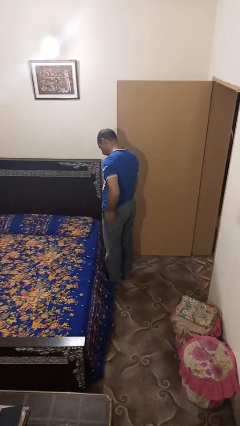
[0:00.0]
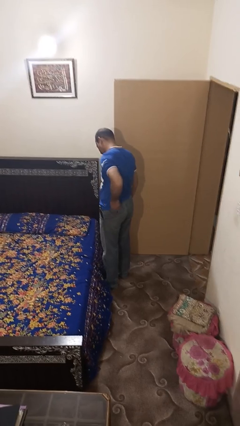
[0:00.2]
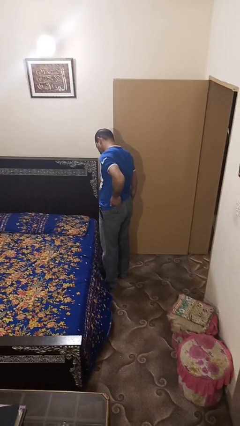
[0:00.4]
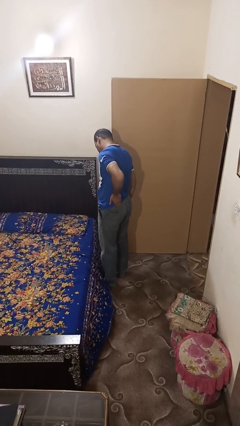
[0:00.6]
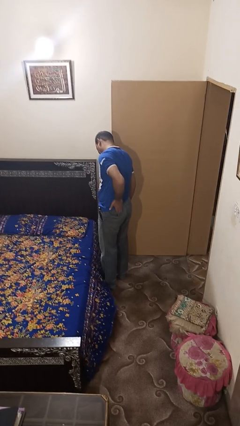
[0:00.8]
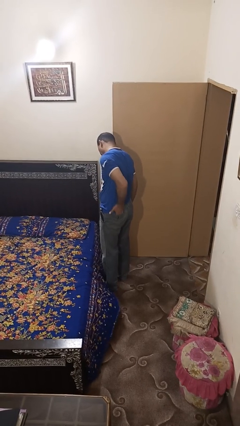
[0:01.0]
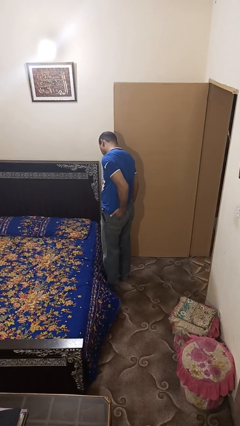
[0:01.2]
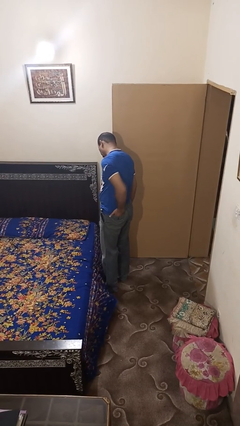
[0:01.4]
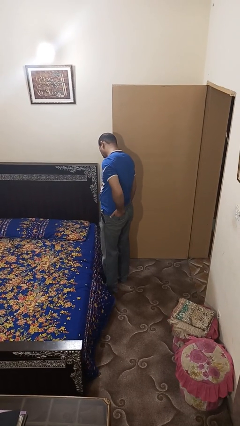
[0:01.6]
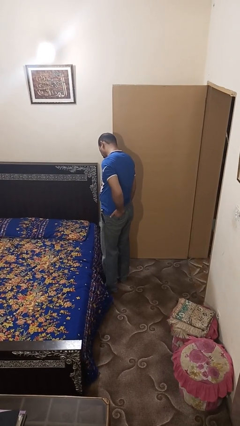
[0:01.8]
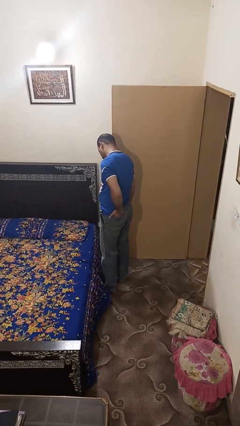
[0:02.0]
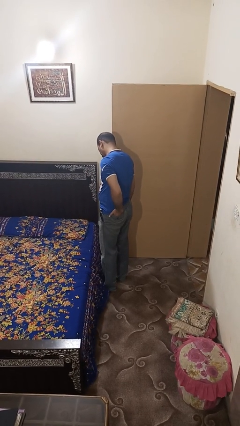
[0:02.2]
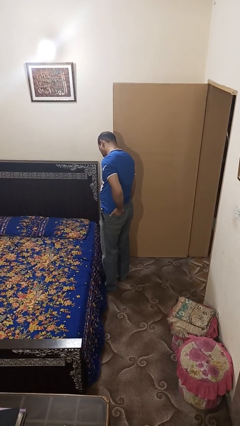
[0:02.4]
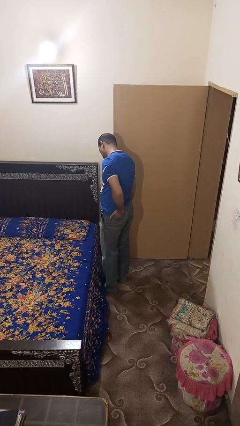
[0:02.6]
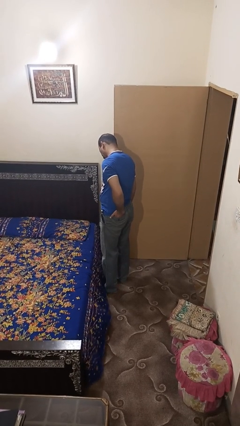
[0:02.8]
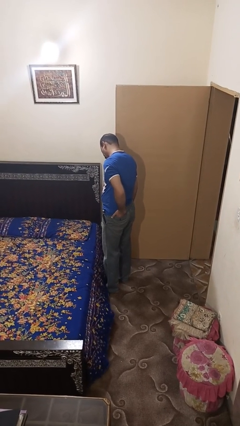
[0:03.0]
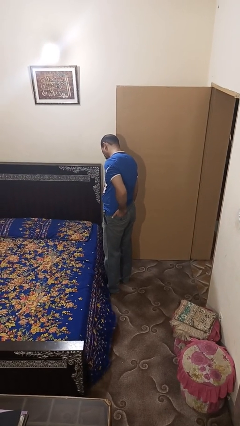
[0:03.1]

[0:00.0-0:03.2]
person puts hands in back pockets

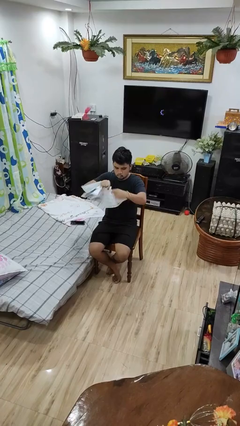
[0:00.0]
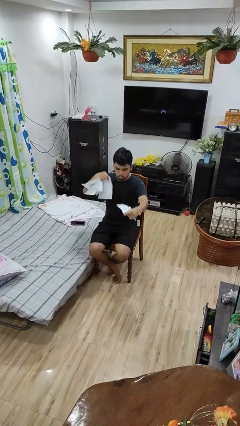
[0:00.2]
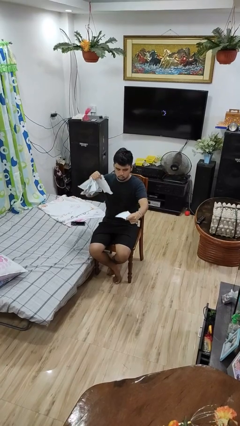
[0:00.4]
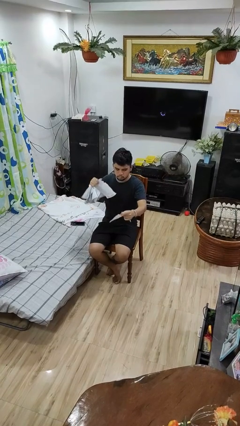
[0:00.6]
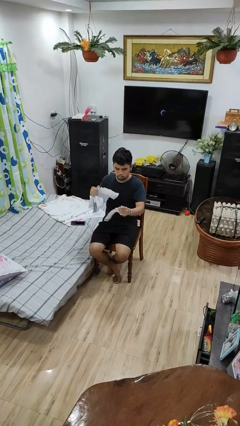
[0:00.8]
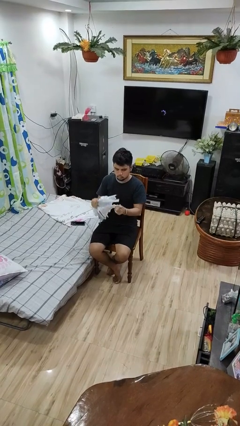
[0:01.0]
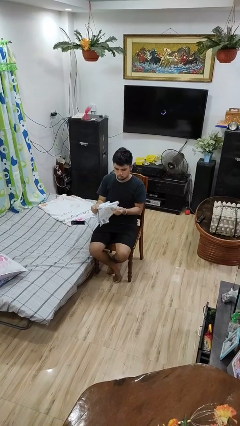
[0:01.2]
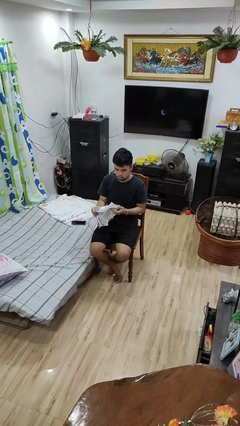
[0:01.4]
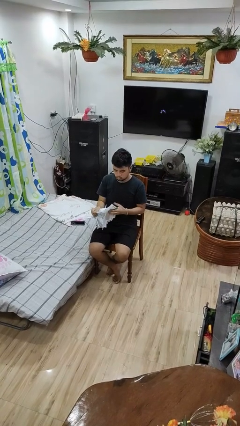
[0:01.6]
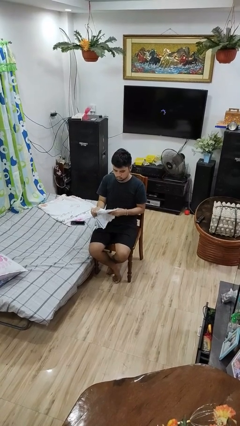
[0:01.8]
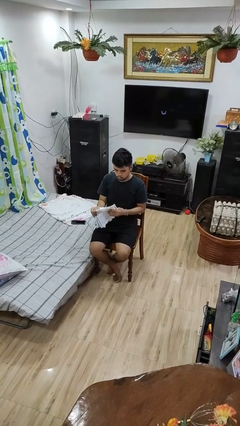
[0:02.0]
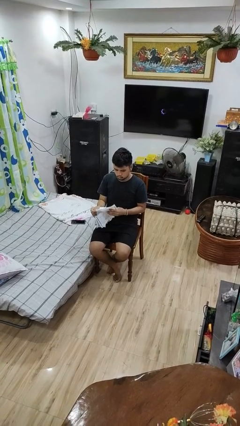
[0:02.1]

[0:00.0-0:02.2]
person tears paper

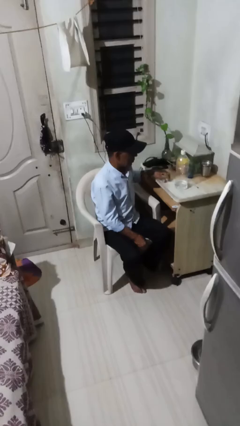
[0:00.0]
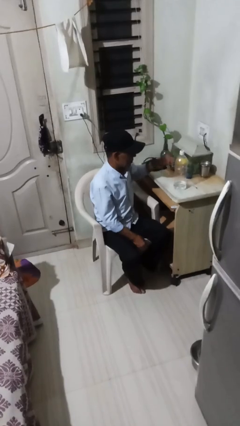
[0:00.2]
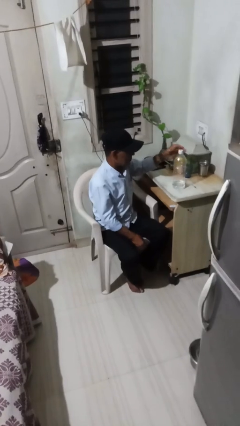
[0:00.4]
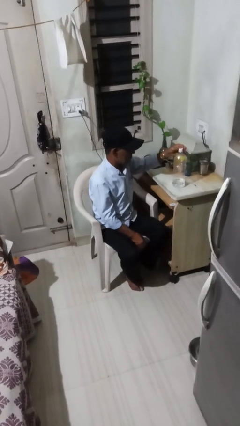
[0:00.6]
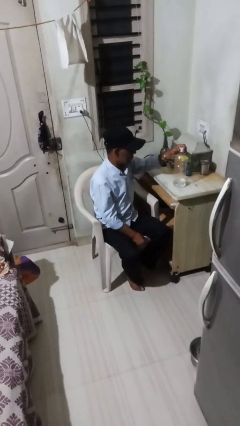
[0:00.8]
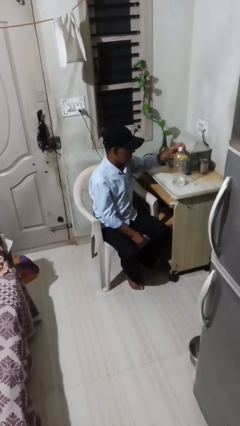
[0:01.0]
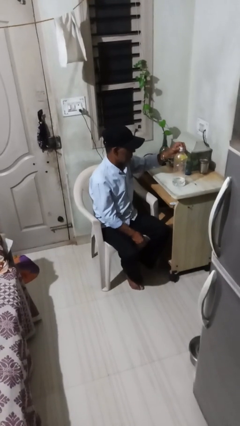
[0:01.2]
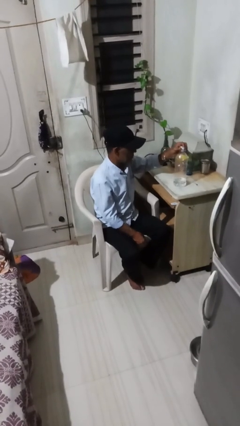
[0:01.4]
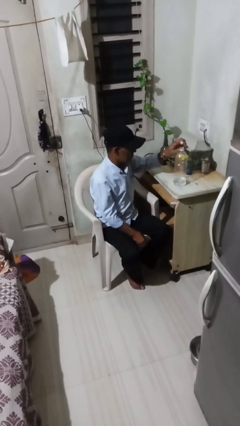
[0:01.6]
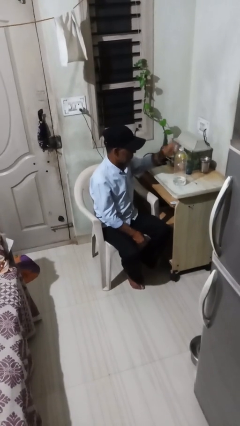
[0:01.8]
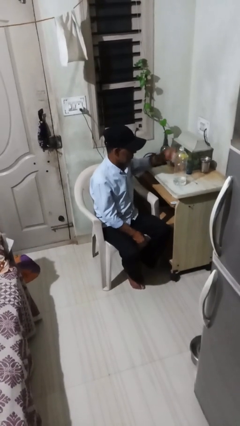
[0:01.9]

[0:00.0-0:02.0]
person unscrews lid from bottle

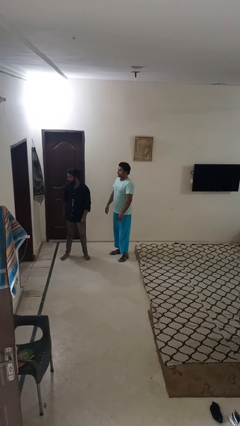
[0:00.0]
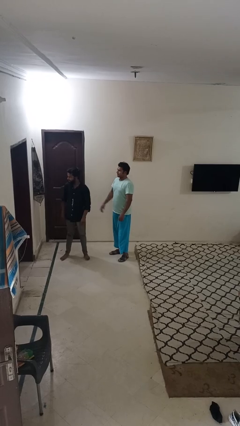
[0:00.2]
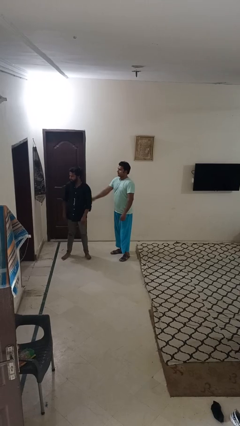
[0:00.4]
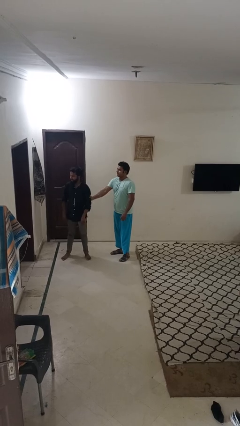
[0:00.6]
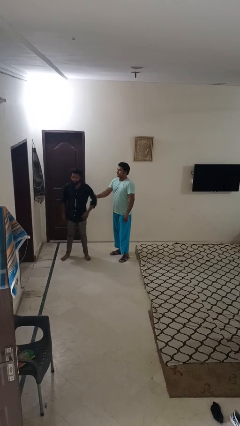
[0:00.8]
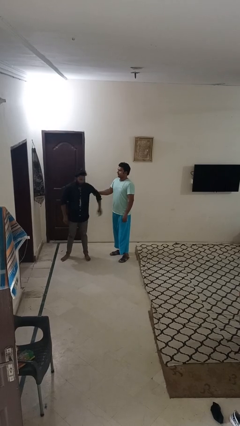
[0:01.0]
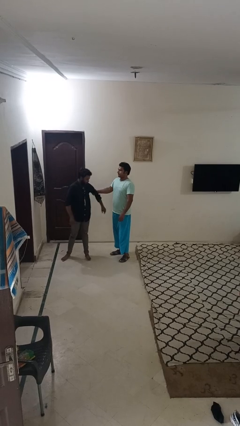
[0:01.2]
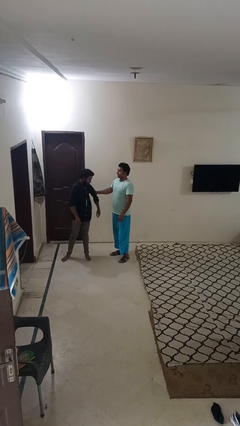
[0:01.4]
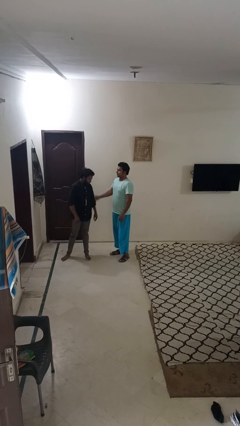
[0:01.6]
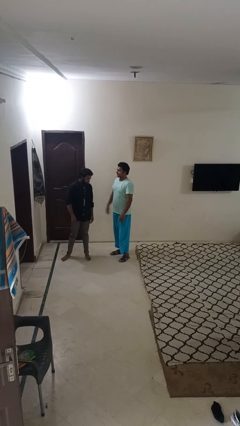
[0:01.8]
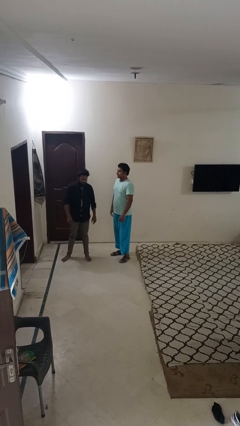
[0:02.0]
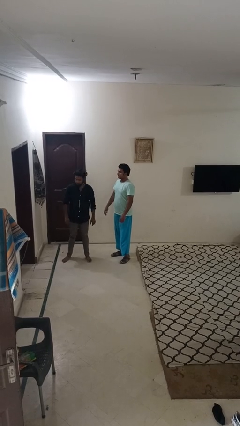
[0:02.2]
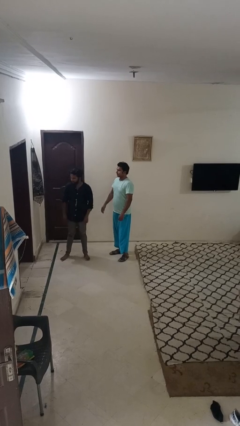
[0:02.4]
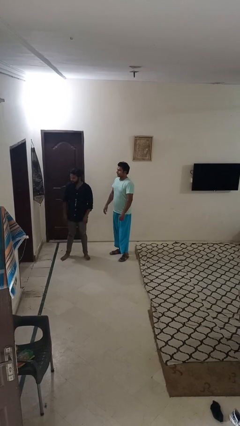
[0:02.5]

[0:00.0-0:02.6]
person grabs person by bicep

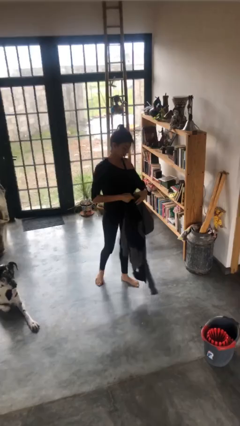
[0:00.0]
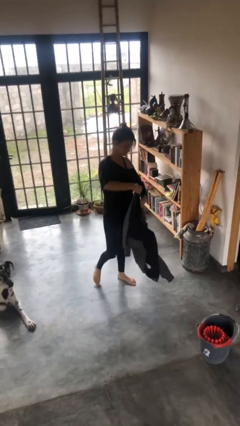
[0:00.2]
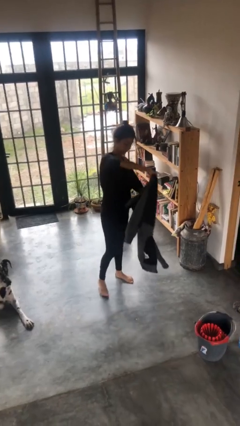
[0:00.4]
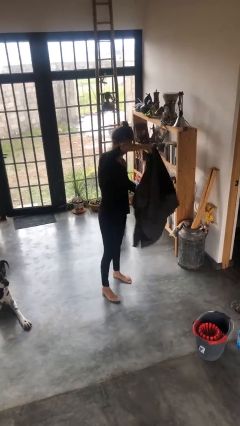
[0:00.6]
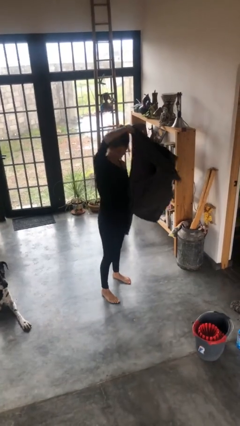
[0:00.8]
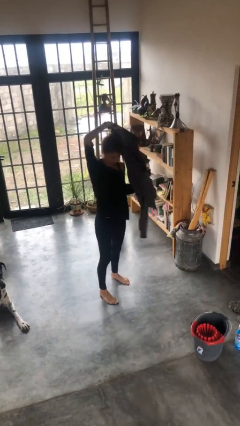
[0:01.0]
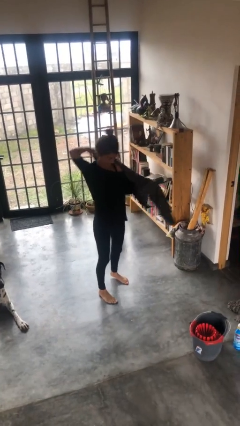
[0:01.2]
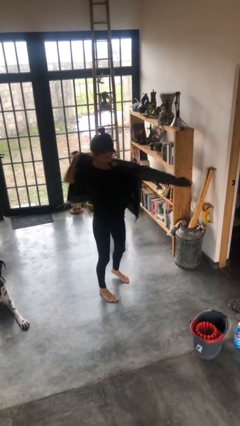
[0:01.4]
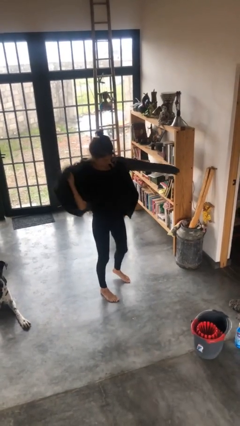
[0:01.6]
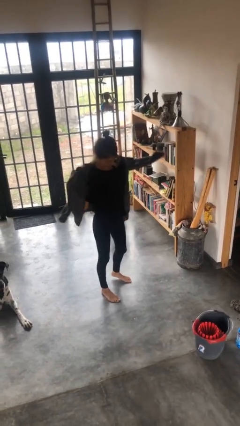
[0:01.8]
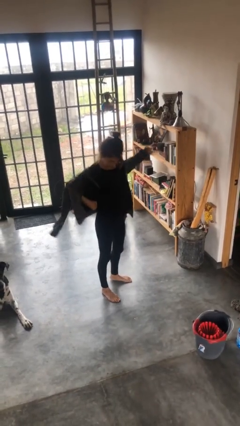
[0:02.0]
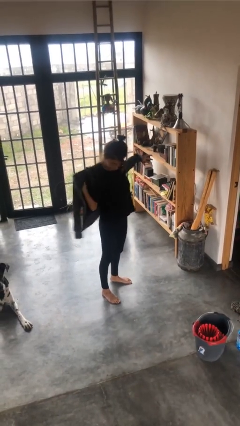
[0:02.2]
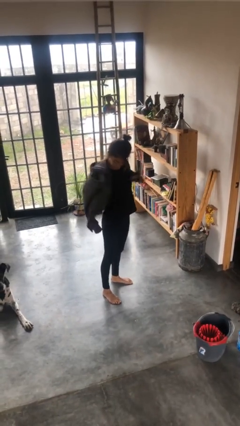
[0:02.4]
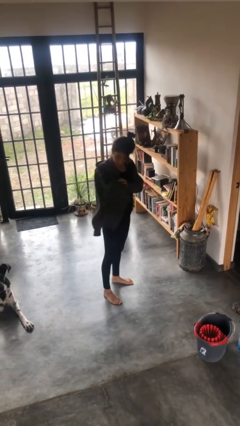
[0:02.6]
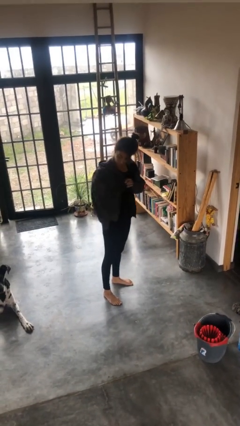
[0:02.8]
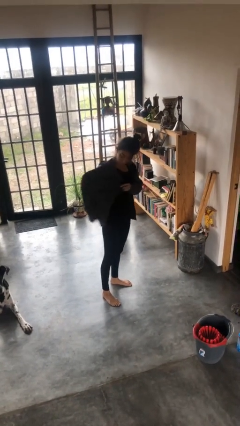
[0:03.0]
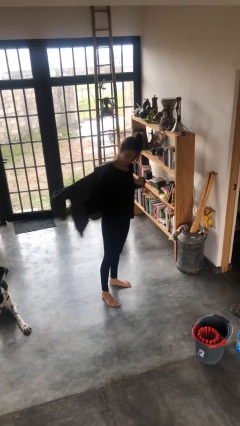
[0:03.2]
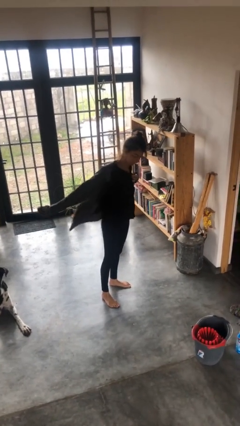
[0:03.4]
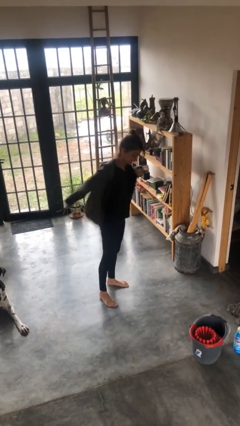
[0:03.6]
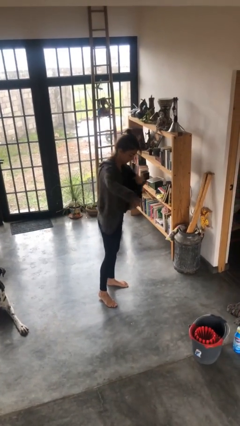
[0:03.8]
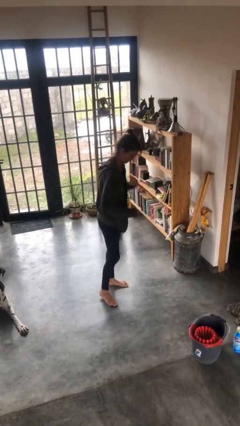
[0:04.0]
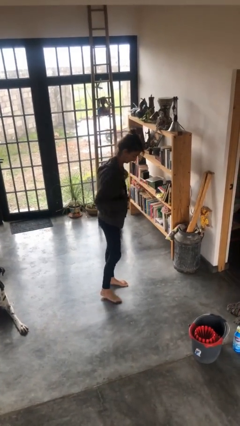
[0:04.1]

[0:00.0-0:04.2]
person puts on jacket

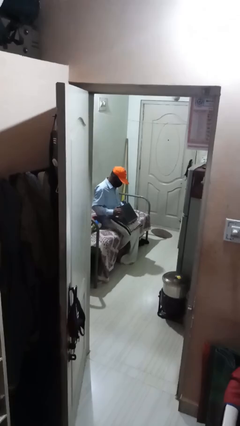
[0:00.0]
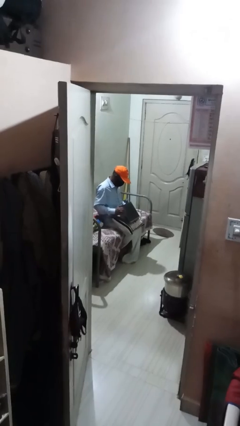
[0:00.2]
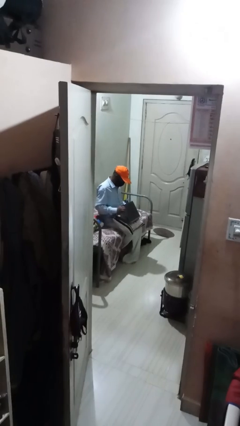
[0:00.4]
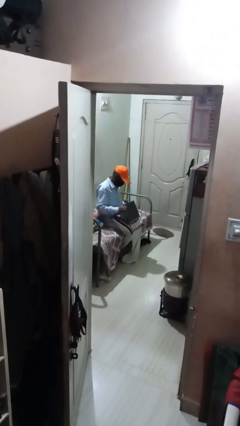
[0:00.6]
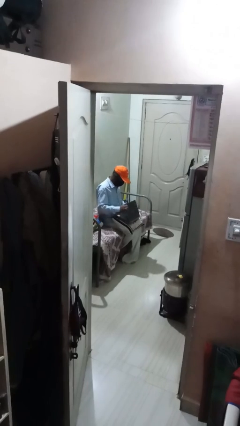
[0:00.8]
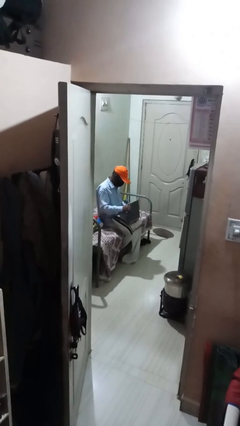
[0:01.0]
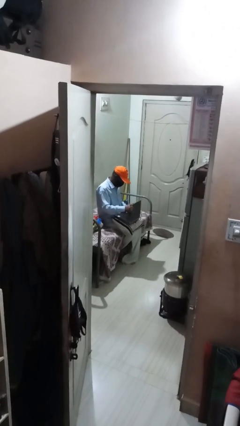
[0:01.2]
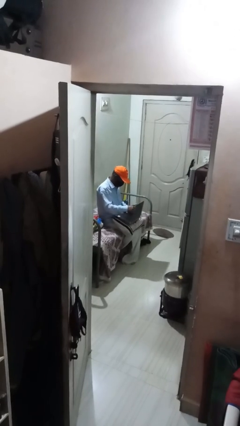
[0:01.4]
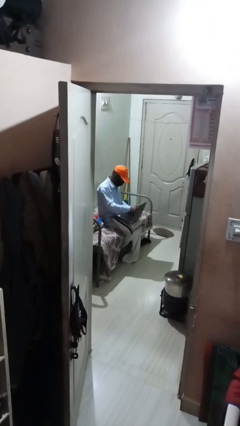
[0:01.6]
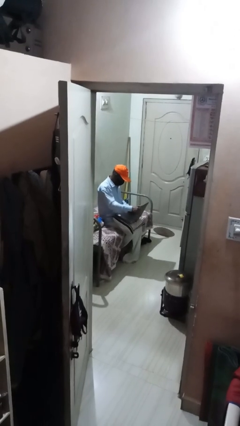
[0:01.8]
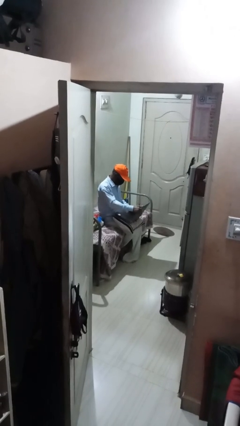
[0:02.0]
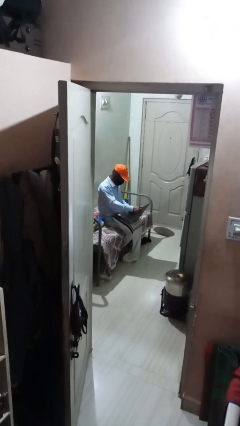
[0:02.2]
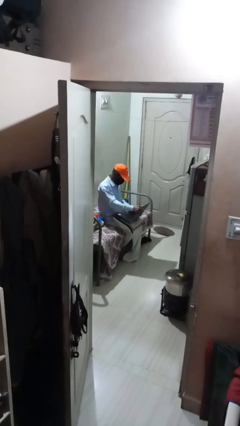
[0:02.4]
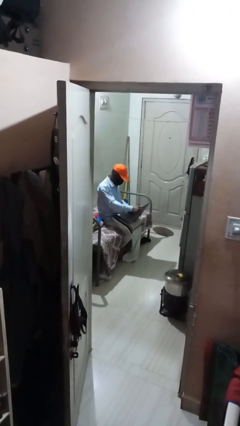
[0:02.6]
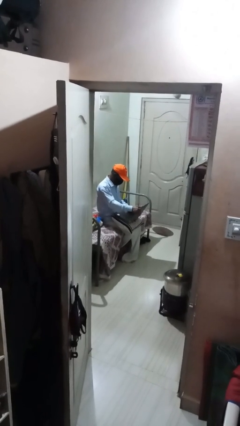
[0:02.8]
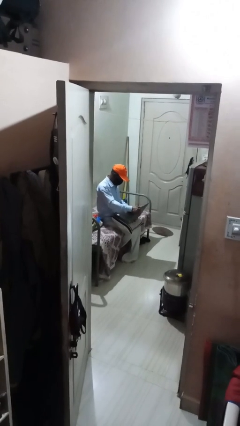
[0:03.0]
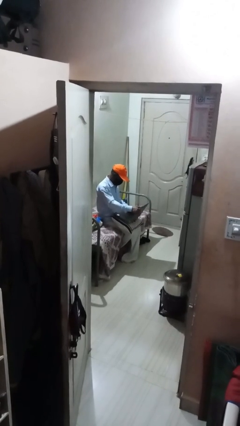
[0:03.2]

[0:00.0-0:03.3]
person interacts with laptop
